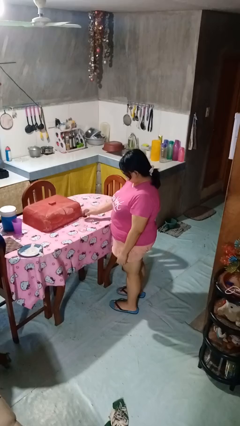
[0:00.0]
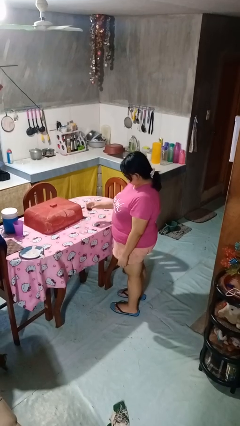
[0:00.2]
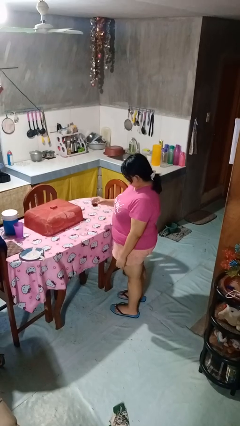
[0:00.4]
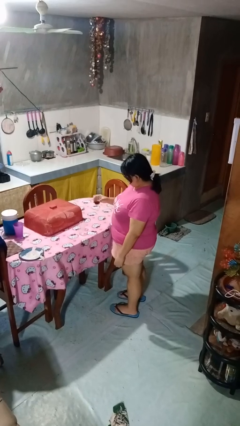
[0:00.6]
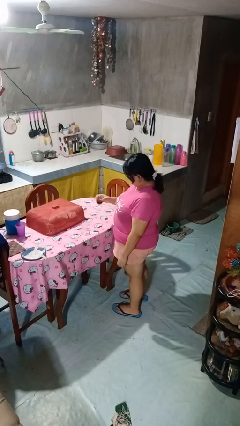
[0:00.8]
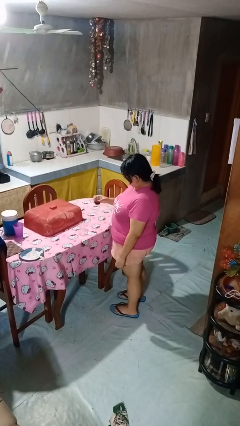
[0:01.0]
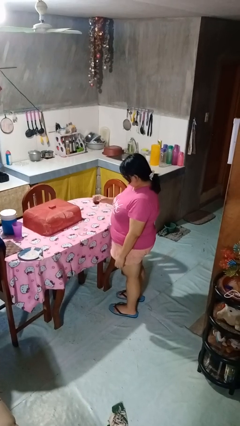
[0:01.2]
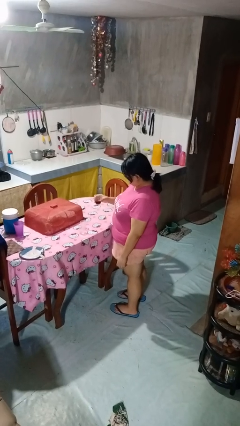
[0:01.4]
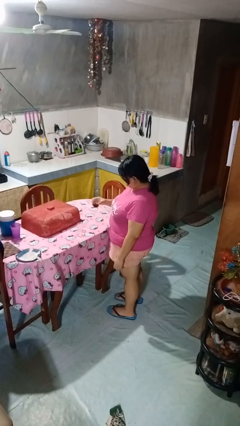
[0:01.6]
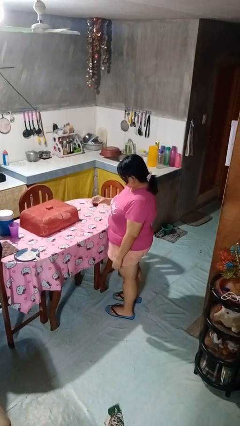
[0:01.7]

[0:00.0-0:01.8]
person picks up object from table

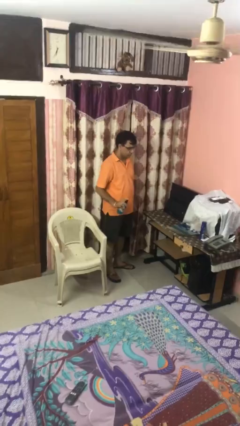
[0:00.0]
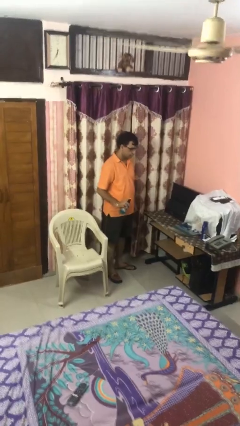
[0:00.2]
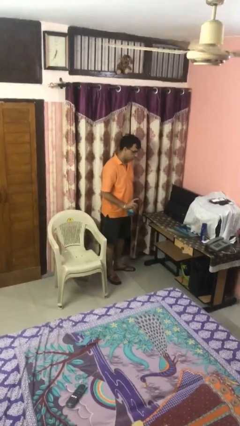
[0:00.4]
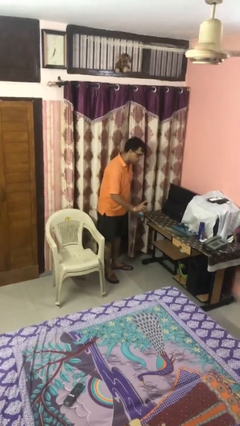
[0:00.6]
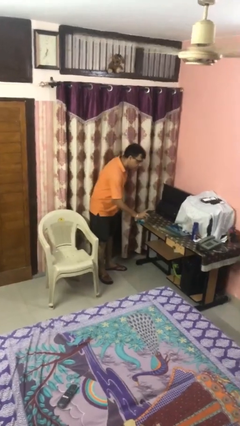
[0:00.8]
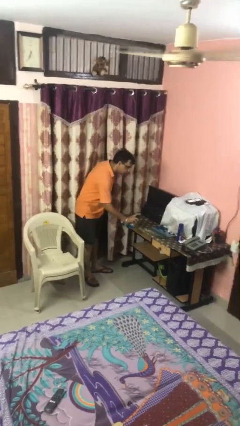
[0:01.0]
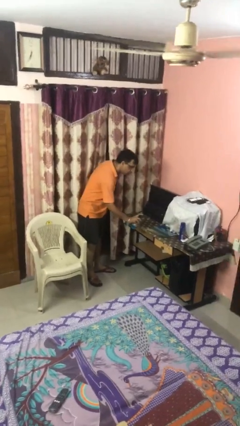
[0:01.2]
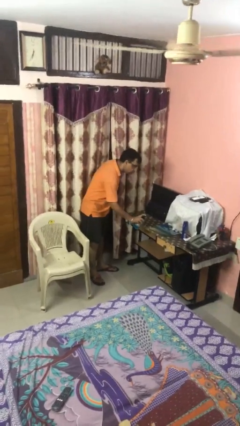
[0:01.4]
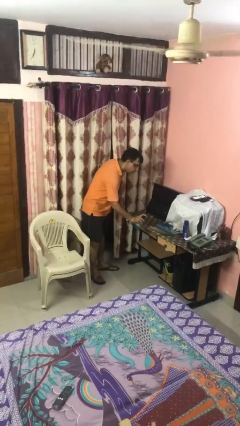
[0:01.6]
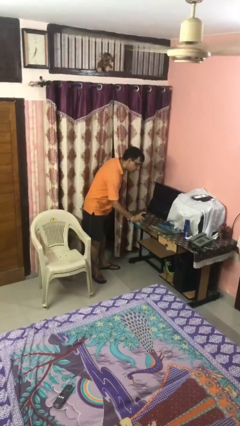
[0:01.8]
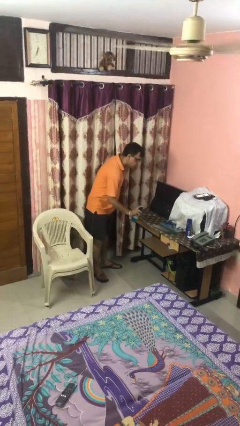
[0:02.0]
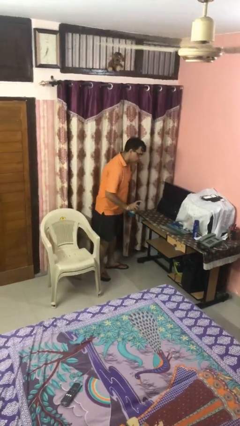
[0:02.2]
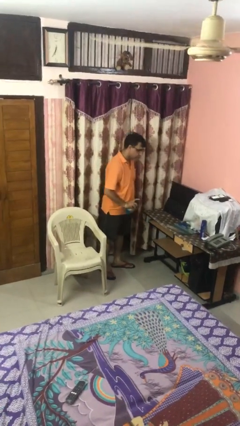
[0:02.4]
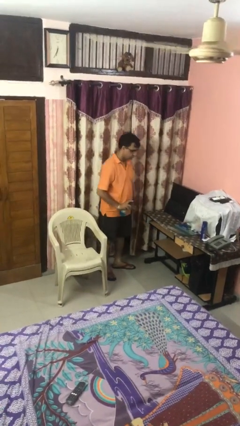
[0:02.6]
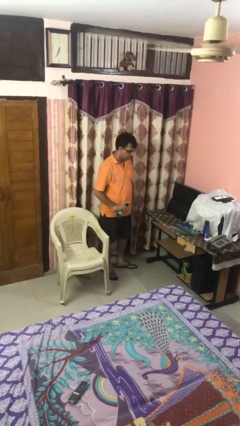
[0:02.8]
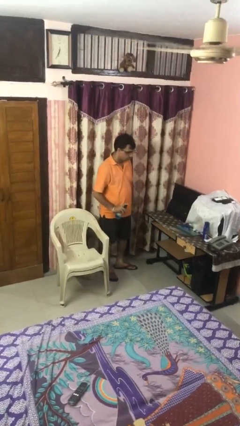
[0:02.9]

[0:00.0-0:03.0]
person sprays from bottle

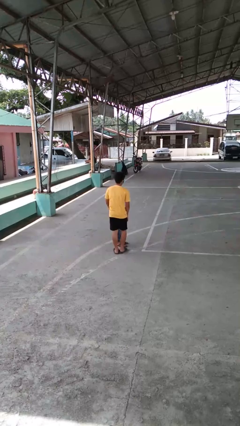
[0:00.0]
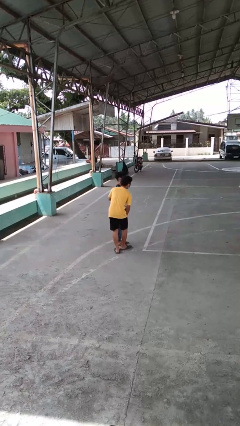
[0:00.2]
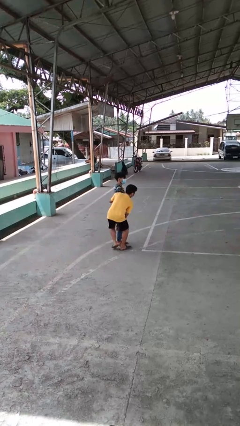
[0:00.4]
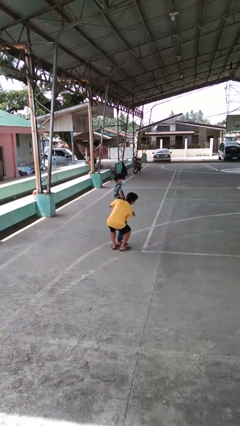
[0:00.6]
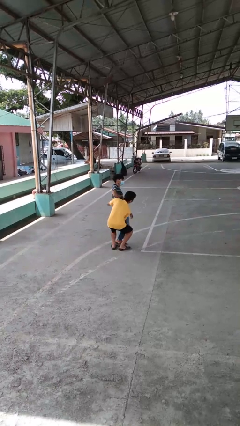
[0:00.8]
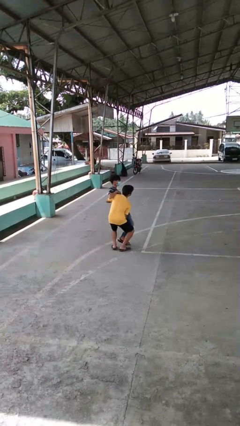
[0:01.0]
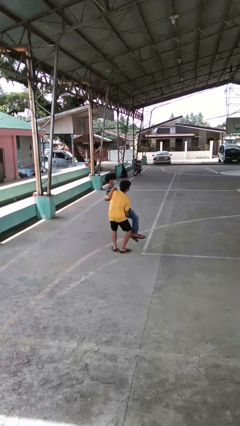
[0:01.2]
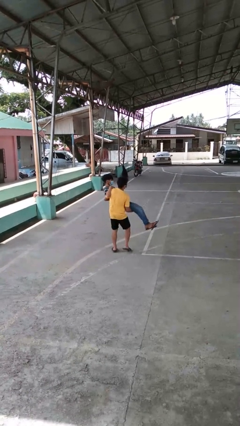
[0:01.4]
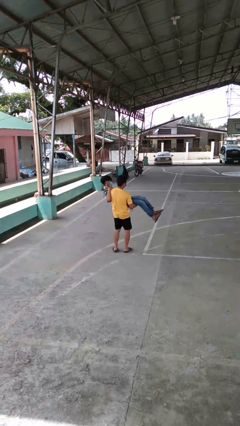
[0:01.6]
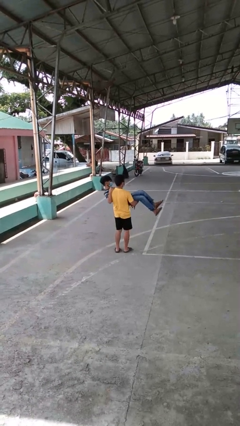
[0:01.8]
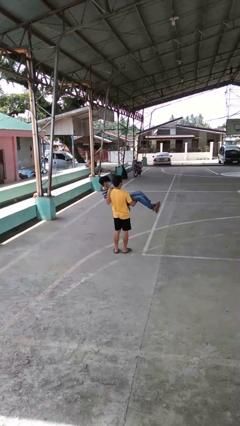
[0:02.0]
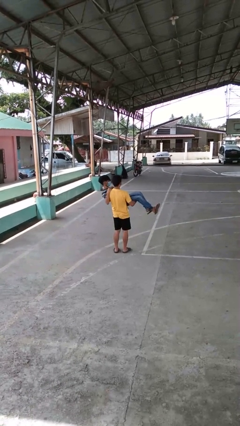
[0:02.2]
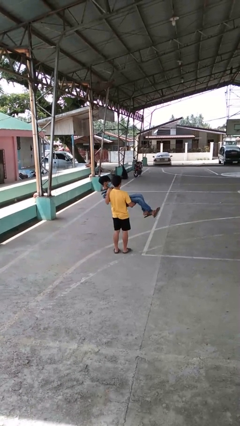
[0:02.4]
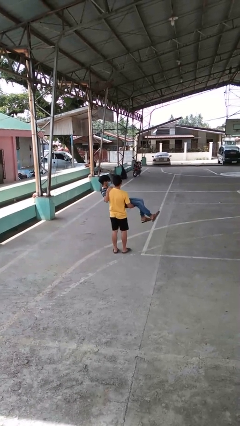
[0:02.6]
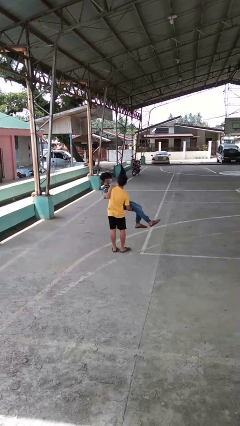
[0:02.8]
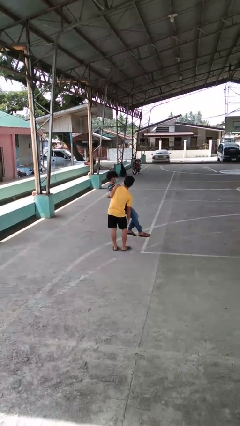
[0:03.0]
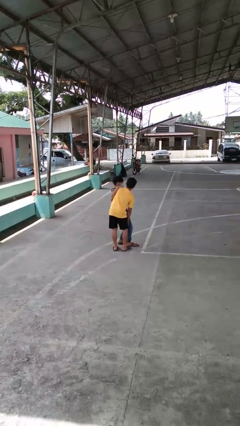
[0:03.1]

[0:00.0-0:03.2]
person picks up person

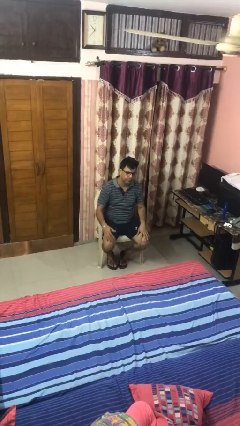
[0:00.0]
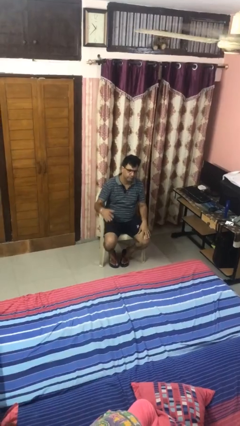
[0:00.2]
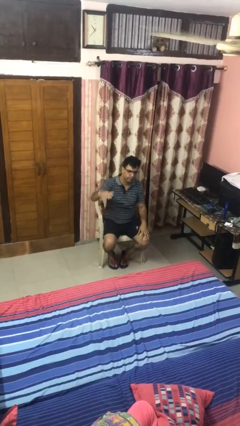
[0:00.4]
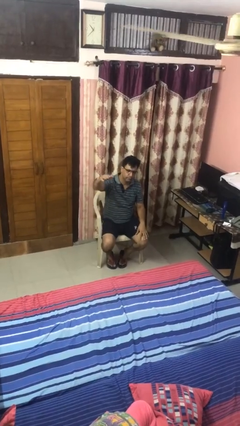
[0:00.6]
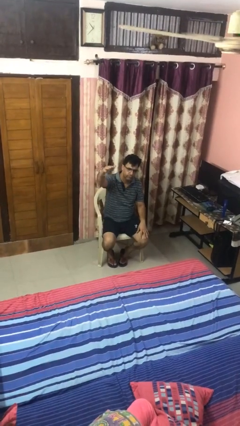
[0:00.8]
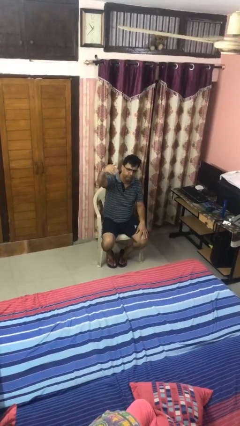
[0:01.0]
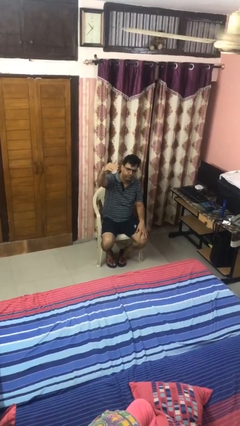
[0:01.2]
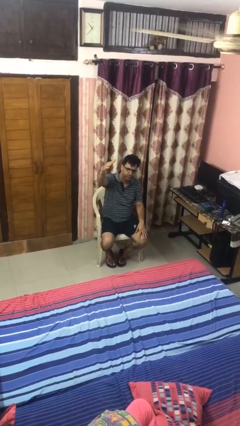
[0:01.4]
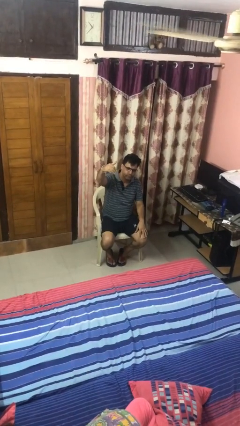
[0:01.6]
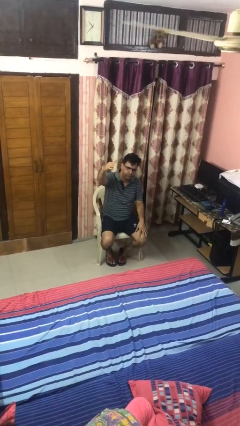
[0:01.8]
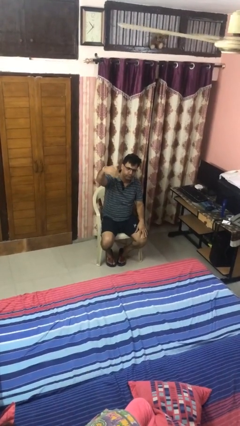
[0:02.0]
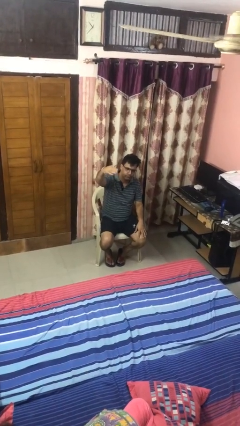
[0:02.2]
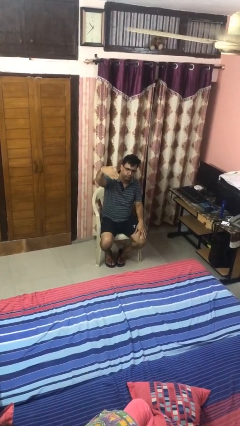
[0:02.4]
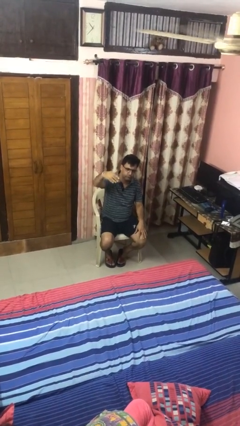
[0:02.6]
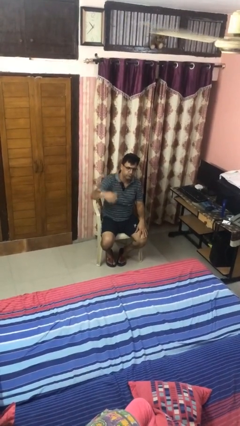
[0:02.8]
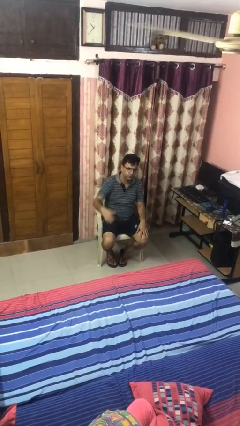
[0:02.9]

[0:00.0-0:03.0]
person gestures come here

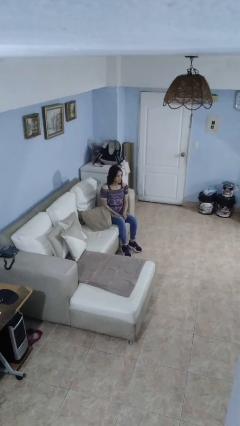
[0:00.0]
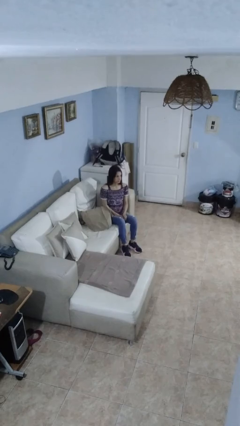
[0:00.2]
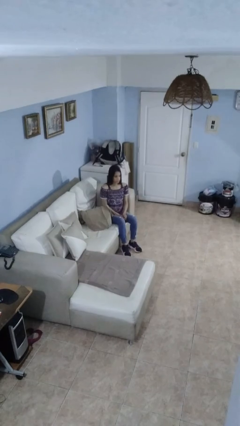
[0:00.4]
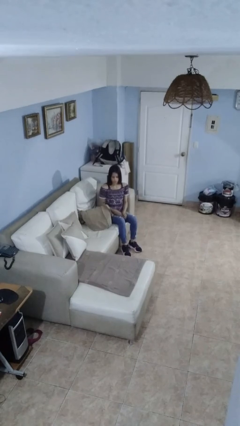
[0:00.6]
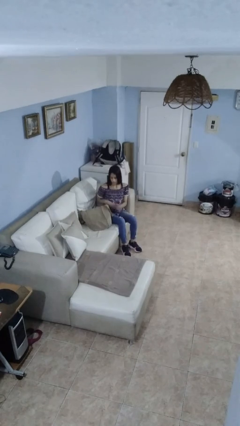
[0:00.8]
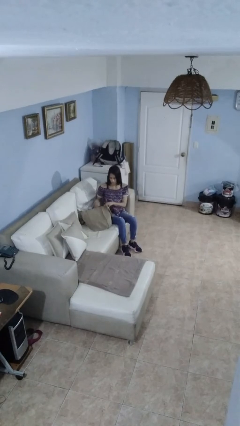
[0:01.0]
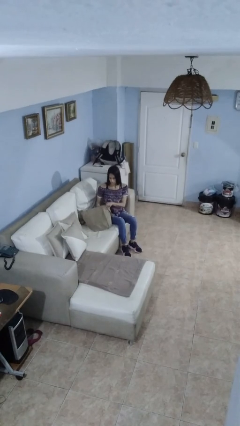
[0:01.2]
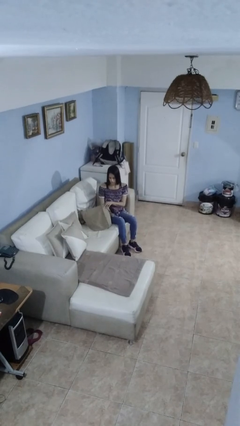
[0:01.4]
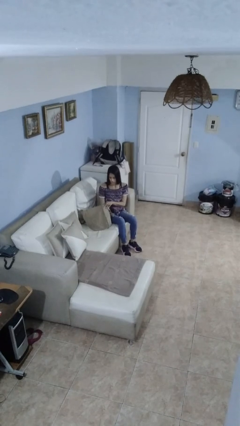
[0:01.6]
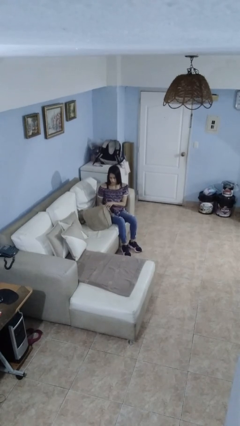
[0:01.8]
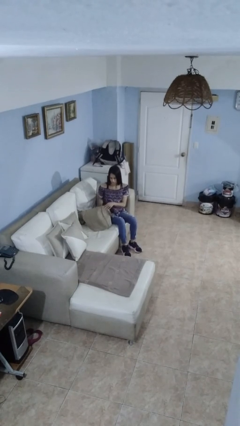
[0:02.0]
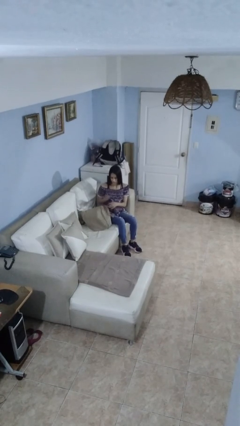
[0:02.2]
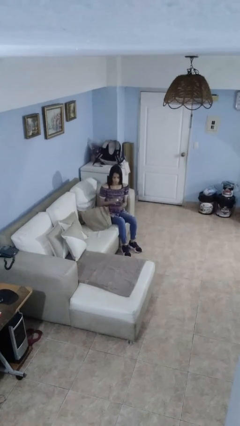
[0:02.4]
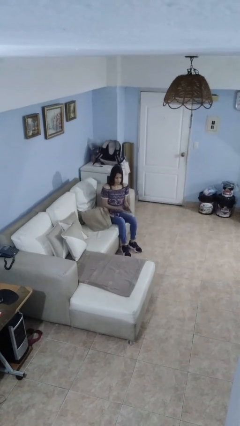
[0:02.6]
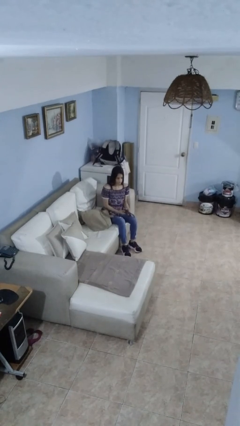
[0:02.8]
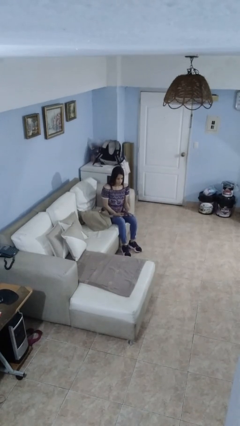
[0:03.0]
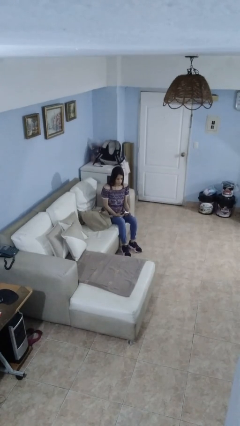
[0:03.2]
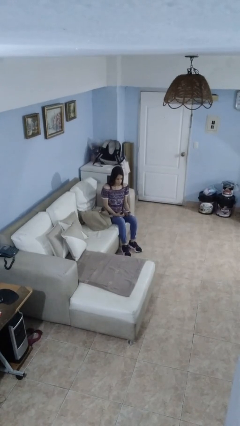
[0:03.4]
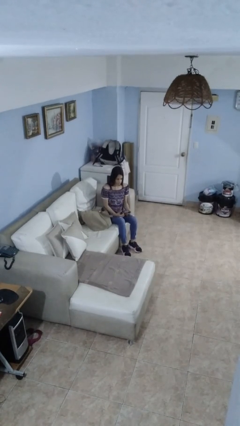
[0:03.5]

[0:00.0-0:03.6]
person takes object from bag

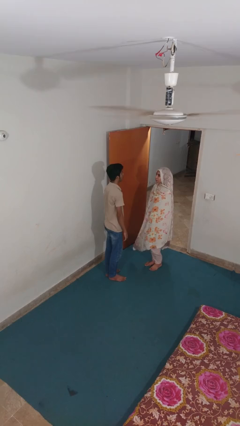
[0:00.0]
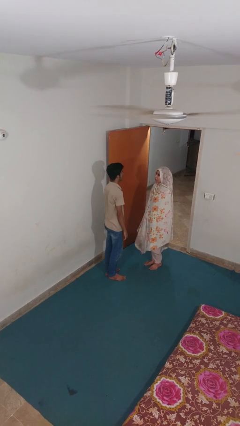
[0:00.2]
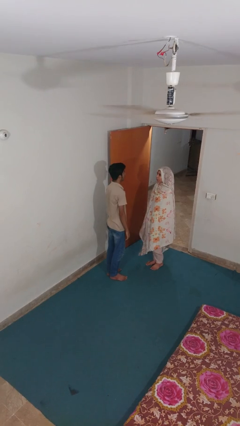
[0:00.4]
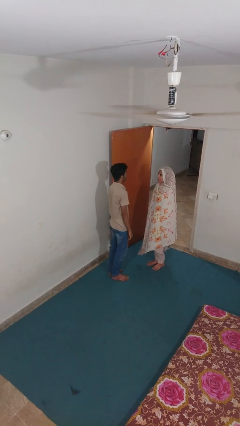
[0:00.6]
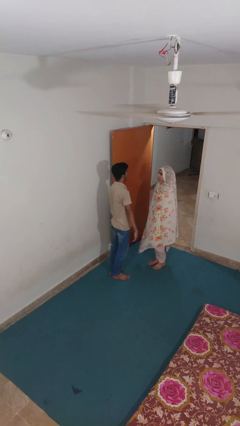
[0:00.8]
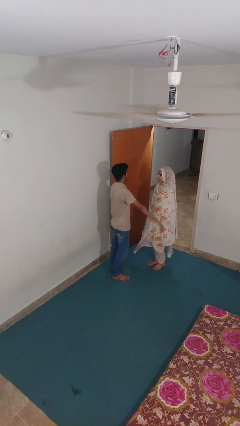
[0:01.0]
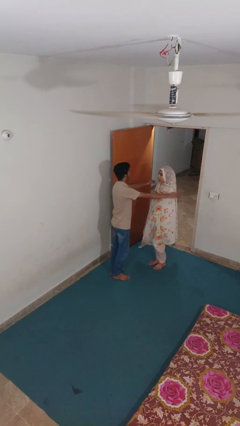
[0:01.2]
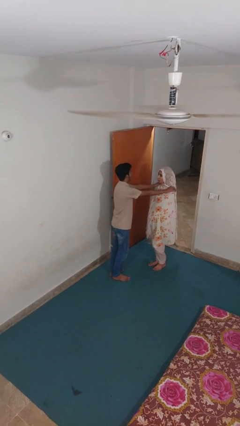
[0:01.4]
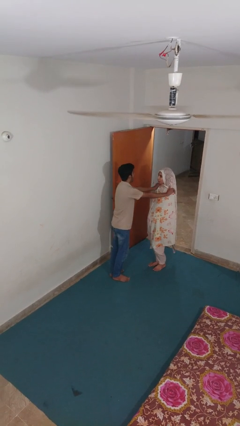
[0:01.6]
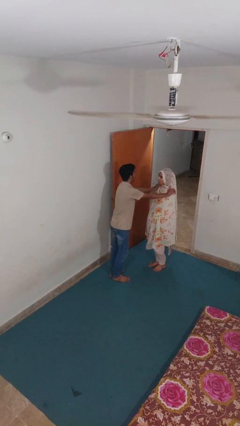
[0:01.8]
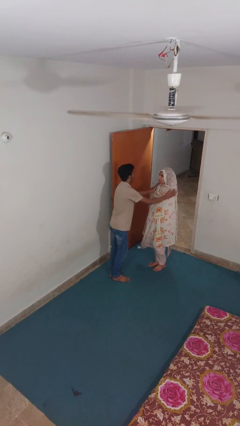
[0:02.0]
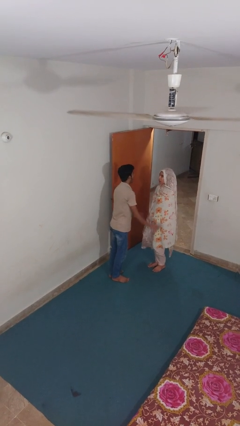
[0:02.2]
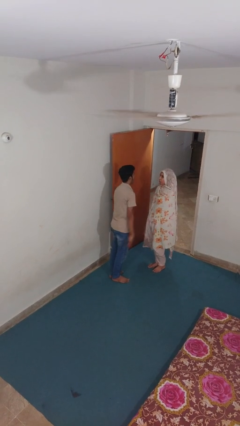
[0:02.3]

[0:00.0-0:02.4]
person pounds shoulders of person
